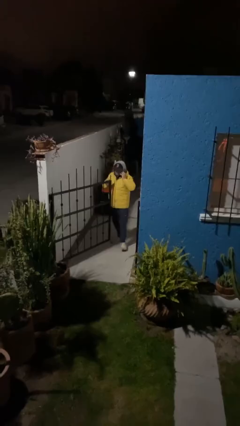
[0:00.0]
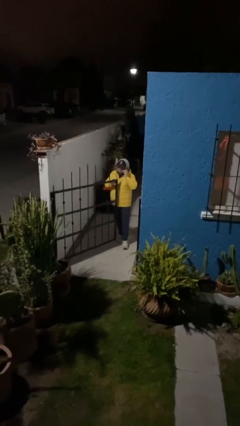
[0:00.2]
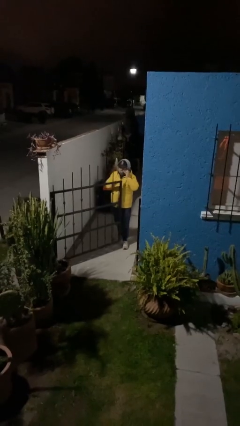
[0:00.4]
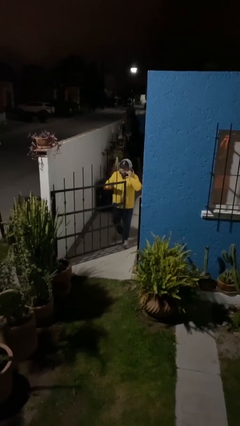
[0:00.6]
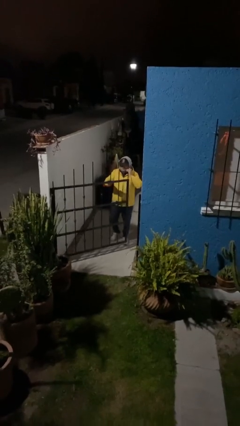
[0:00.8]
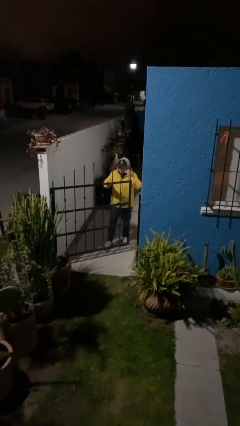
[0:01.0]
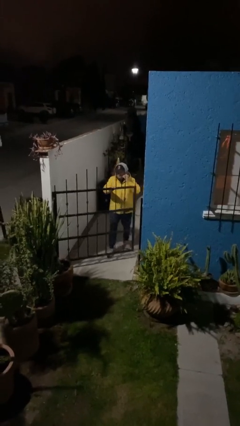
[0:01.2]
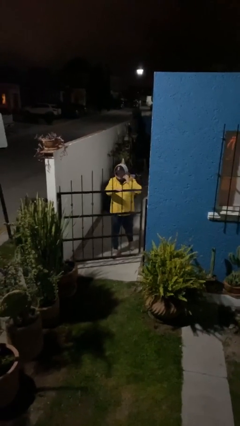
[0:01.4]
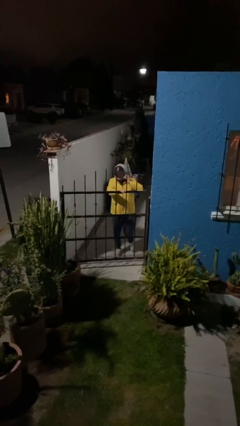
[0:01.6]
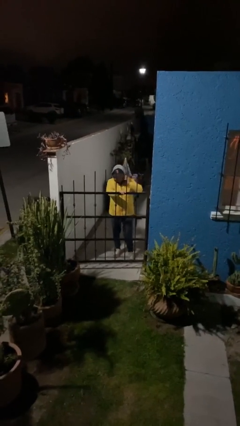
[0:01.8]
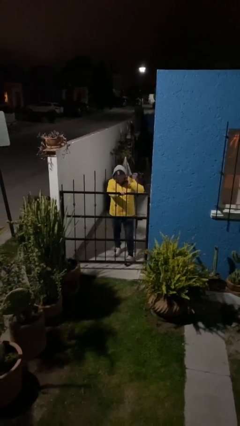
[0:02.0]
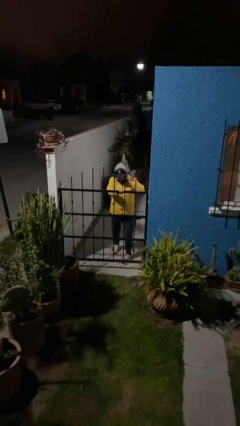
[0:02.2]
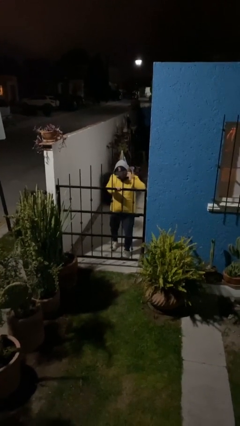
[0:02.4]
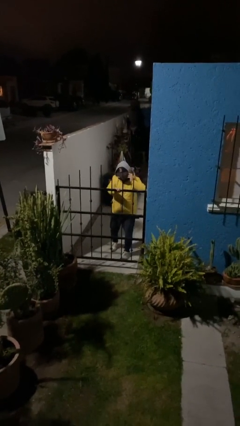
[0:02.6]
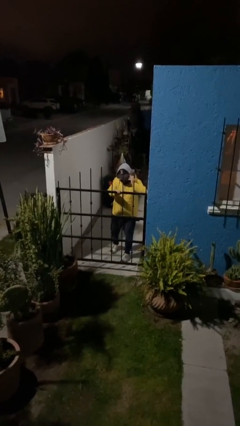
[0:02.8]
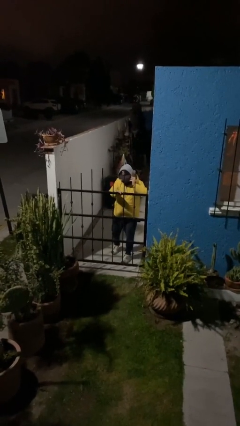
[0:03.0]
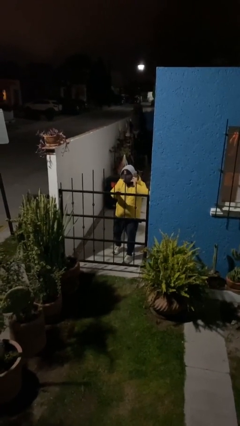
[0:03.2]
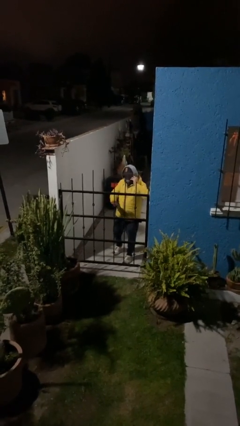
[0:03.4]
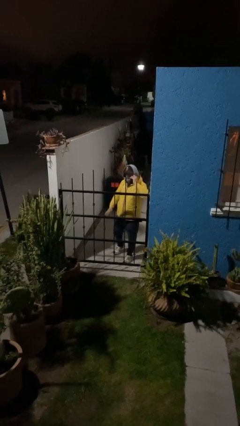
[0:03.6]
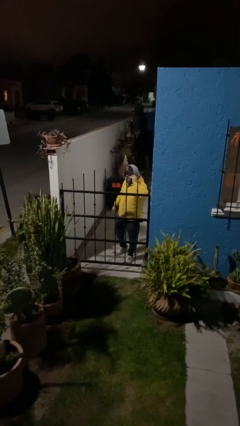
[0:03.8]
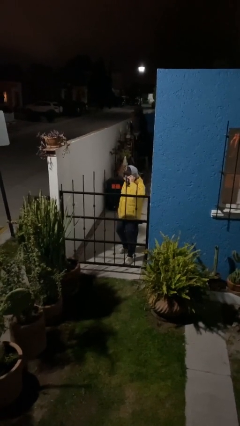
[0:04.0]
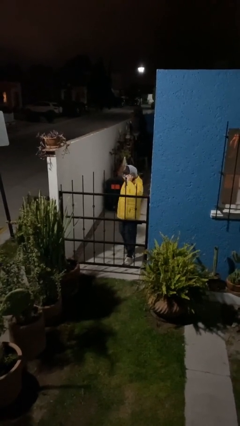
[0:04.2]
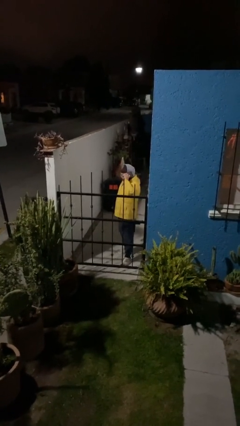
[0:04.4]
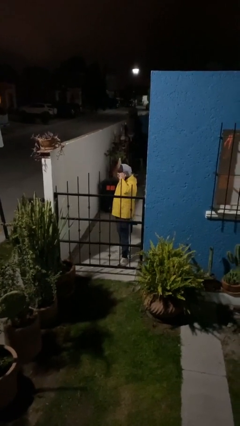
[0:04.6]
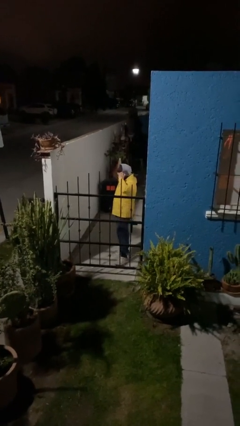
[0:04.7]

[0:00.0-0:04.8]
person closes facility door

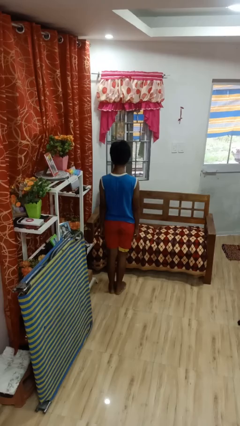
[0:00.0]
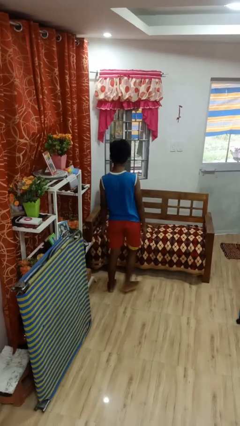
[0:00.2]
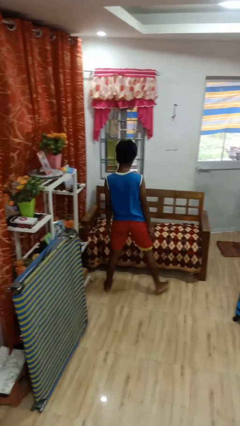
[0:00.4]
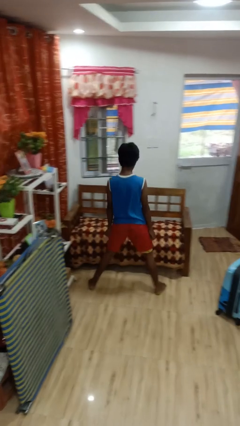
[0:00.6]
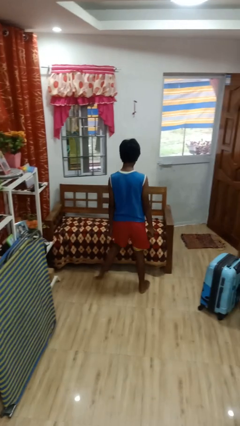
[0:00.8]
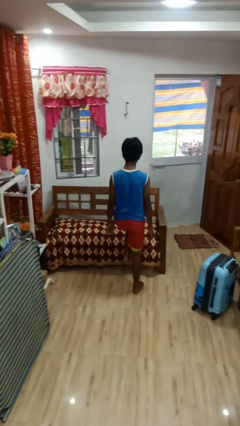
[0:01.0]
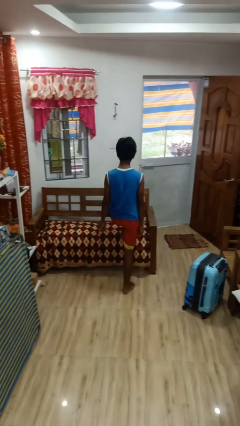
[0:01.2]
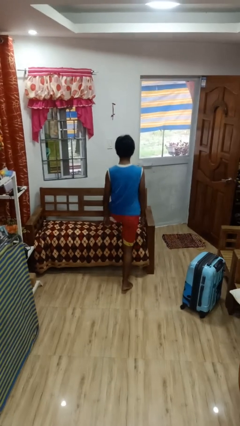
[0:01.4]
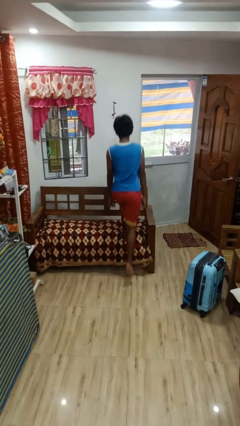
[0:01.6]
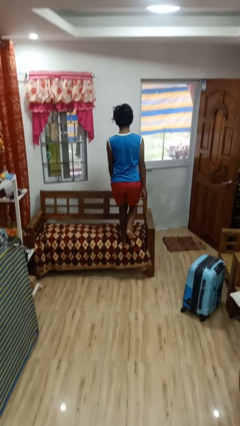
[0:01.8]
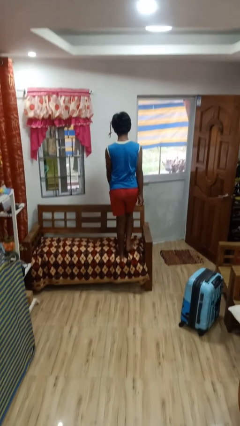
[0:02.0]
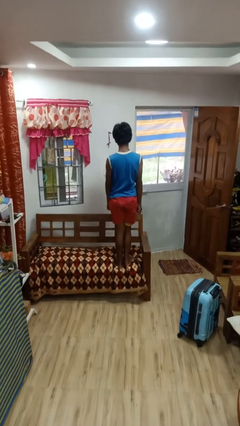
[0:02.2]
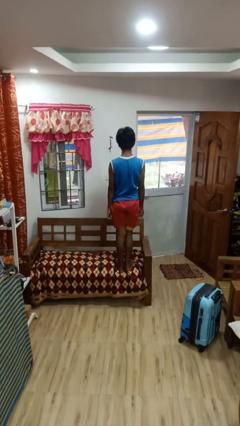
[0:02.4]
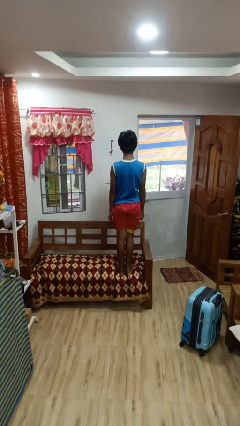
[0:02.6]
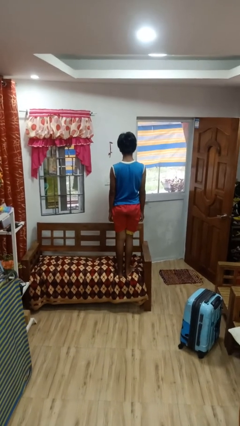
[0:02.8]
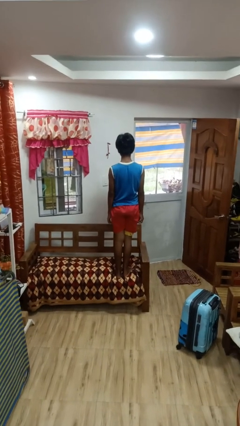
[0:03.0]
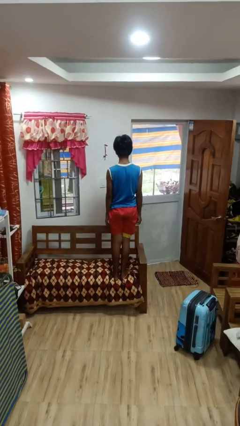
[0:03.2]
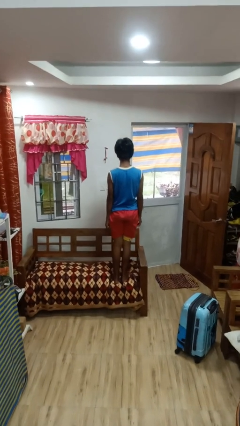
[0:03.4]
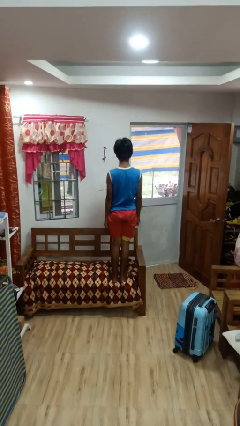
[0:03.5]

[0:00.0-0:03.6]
person climbs on couch

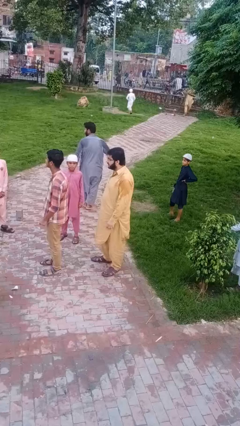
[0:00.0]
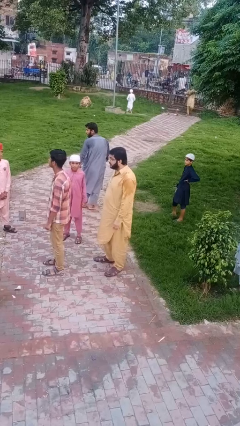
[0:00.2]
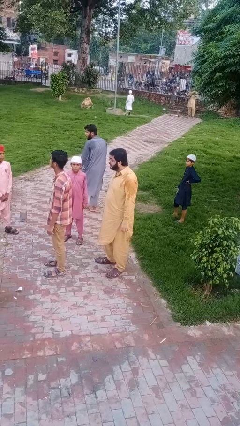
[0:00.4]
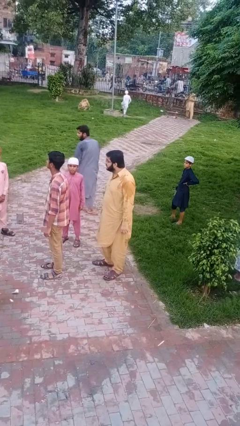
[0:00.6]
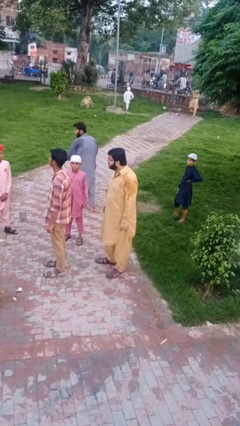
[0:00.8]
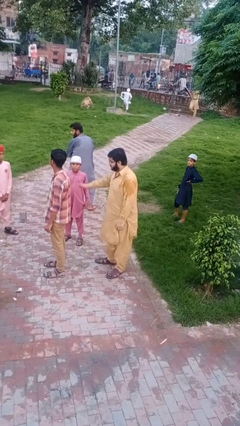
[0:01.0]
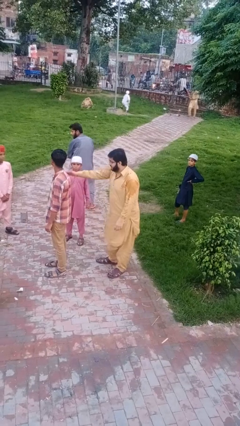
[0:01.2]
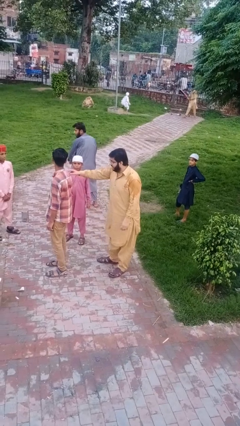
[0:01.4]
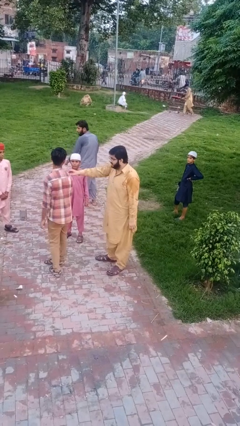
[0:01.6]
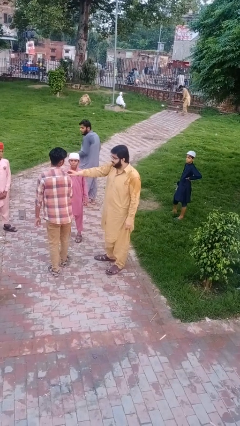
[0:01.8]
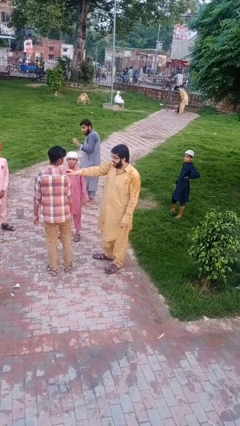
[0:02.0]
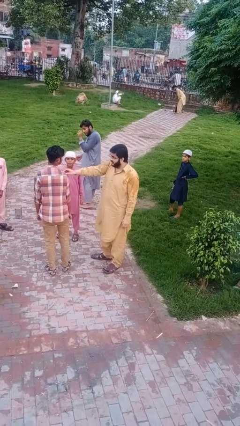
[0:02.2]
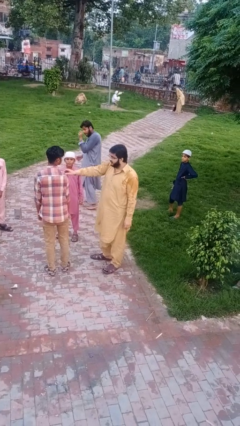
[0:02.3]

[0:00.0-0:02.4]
person grabs person by shoulder

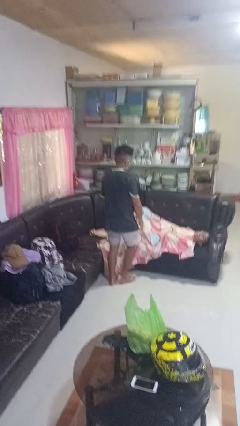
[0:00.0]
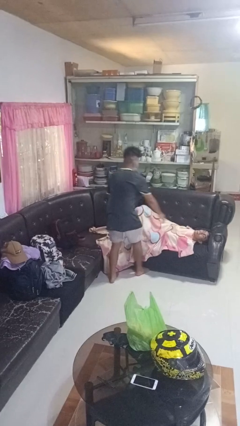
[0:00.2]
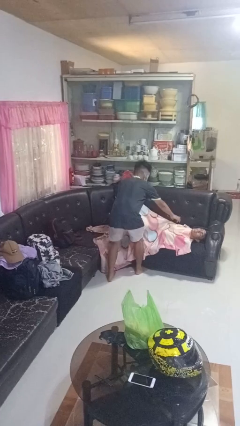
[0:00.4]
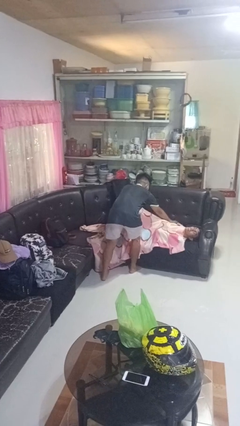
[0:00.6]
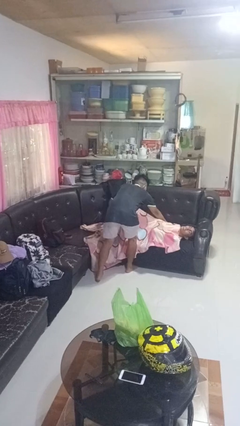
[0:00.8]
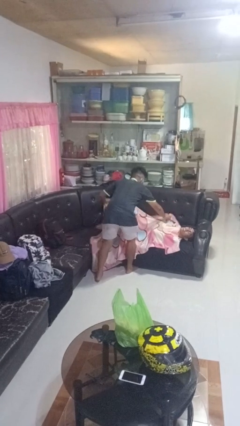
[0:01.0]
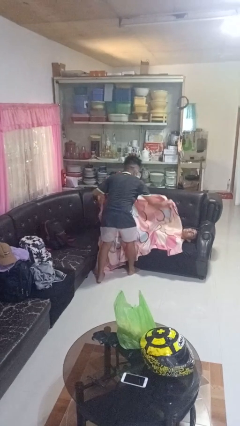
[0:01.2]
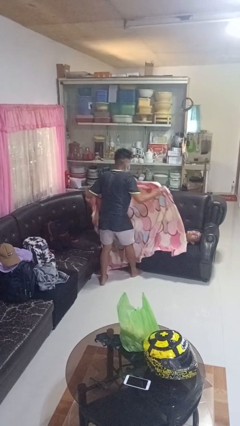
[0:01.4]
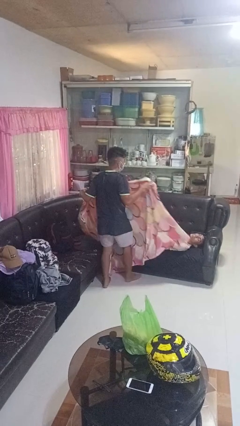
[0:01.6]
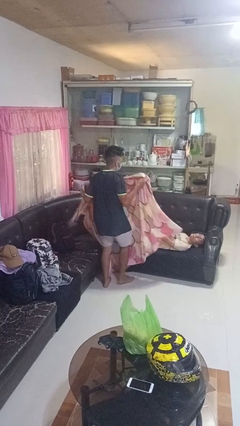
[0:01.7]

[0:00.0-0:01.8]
person uncovers friend with blanket

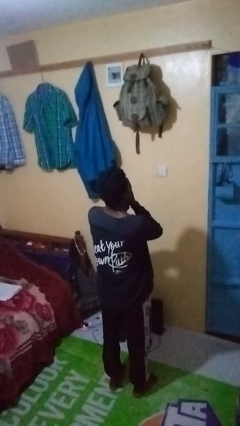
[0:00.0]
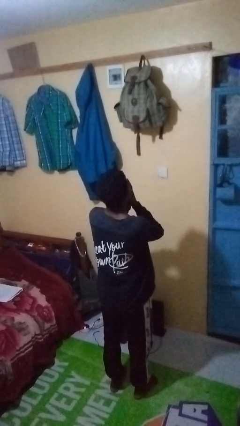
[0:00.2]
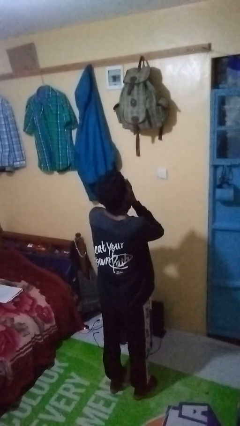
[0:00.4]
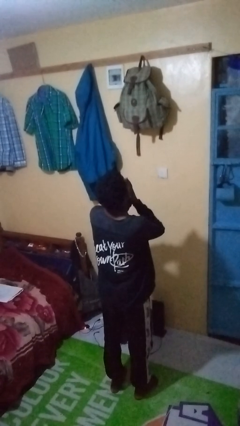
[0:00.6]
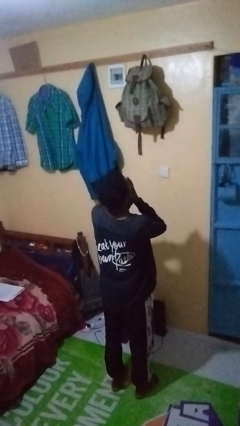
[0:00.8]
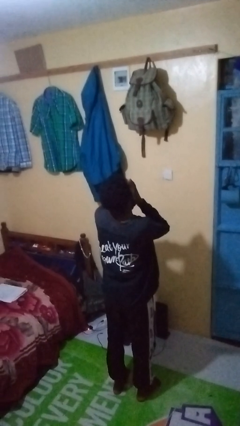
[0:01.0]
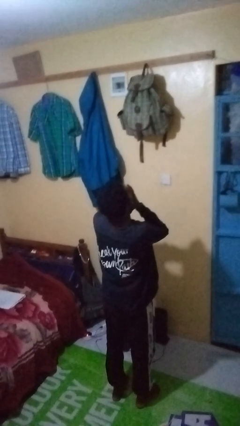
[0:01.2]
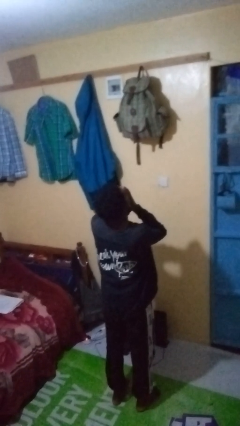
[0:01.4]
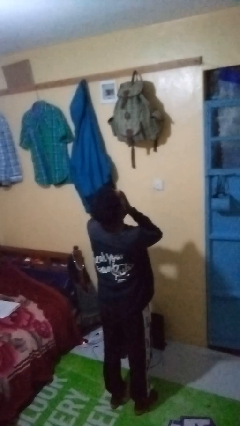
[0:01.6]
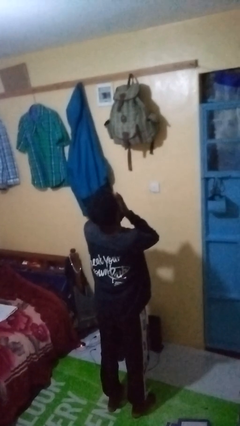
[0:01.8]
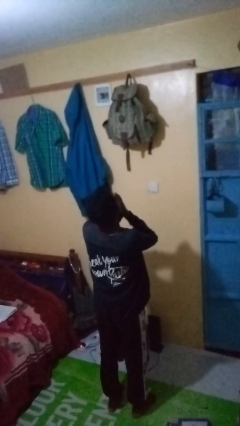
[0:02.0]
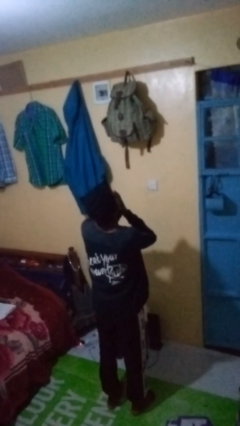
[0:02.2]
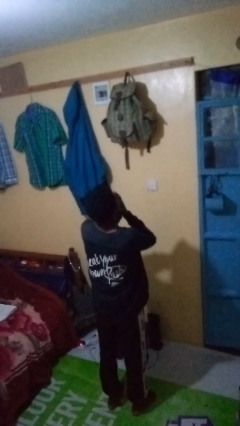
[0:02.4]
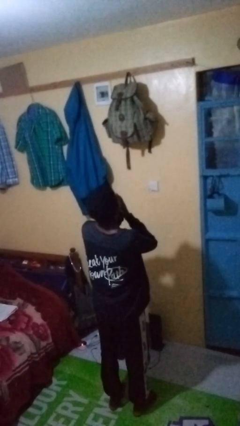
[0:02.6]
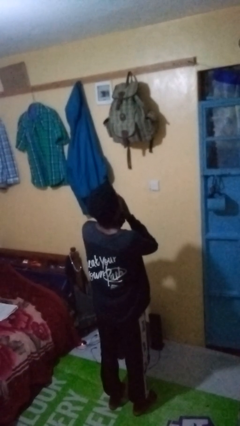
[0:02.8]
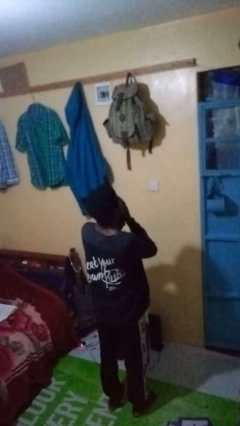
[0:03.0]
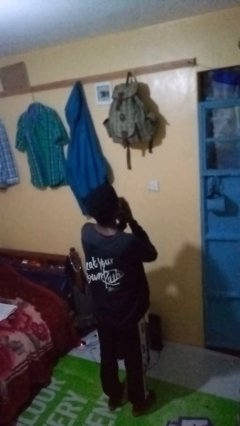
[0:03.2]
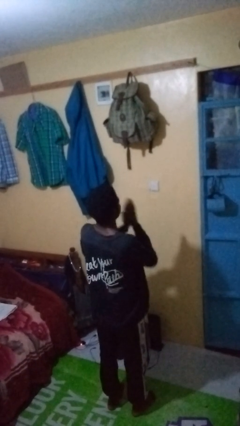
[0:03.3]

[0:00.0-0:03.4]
person yawns

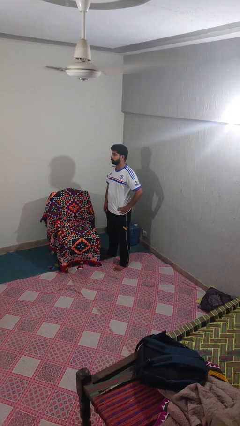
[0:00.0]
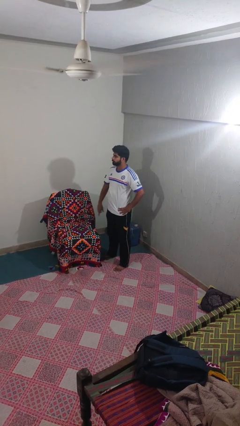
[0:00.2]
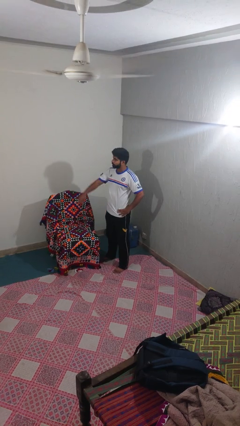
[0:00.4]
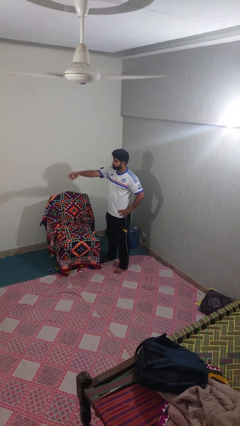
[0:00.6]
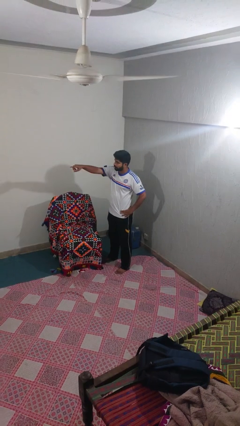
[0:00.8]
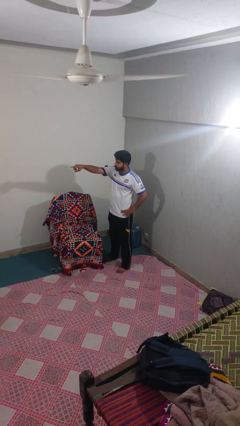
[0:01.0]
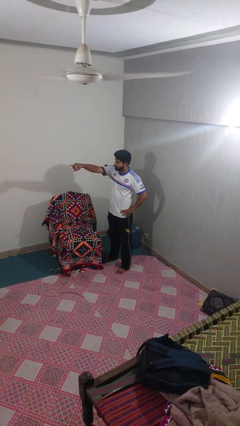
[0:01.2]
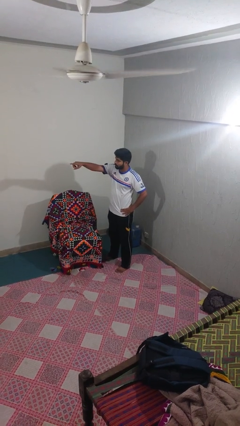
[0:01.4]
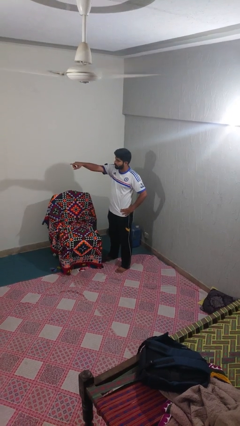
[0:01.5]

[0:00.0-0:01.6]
person points at person

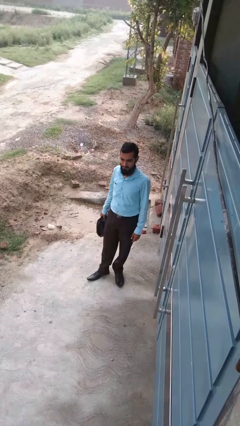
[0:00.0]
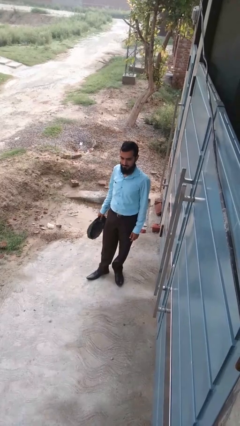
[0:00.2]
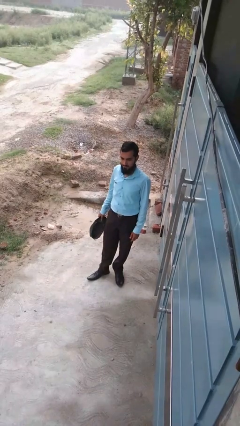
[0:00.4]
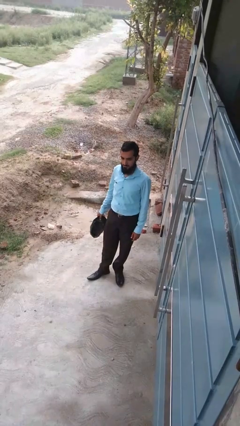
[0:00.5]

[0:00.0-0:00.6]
person puts on hat
